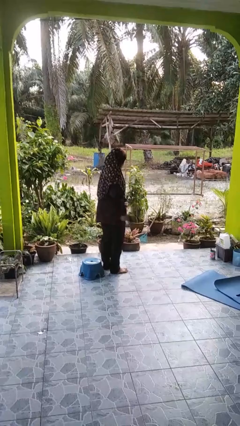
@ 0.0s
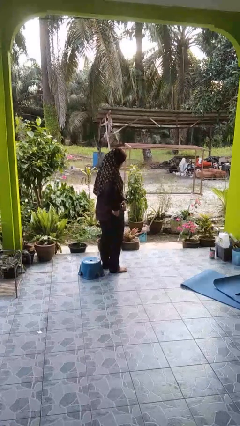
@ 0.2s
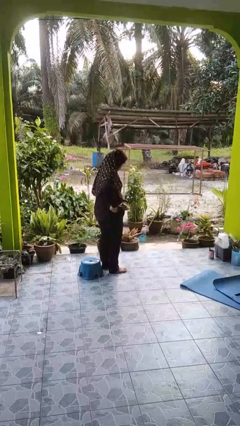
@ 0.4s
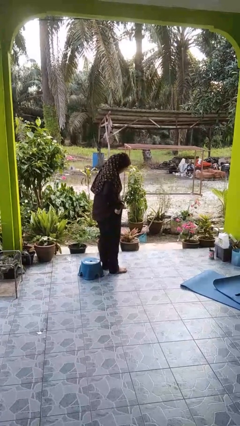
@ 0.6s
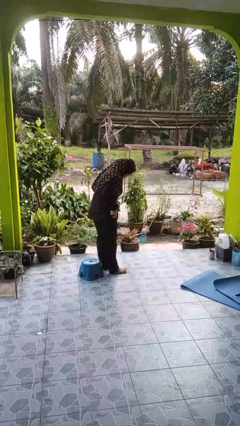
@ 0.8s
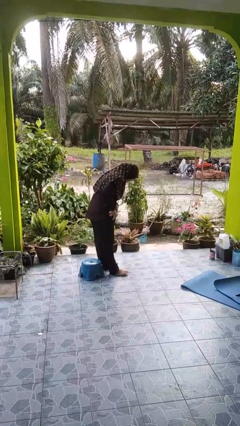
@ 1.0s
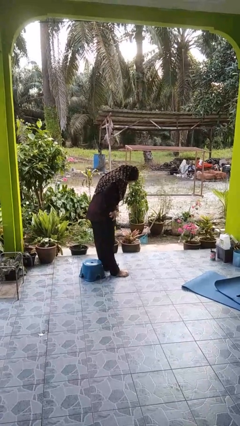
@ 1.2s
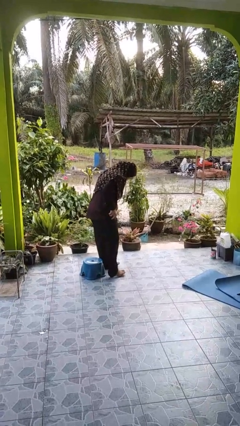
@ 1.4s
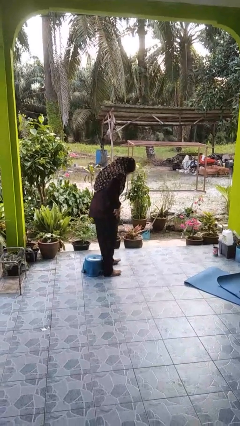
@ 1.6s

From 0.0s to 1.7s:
person puts phone into pocket

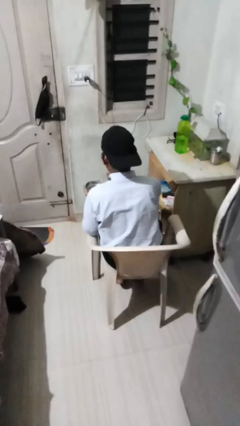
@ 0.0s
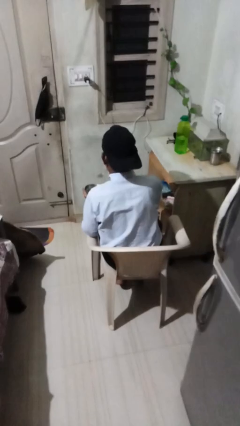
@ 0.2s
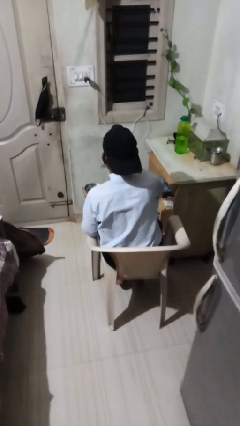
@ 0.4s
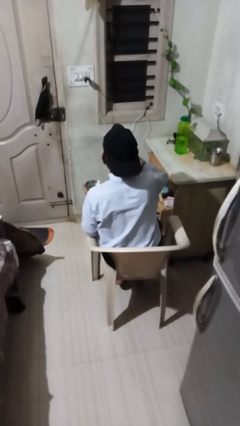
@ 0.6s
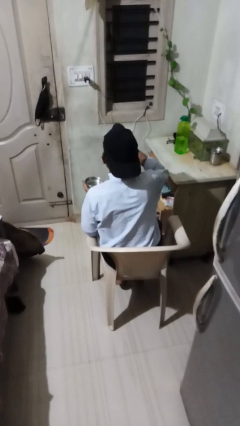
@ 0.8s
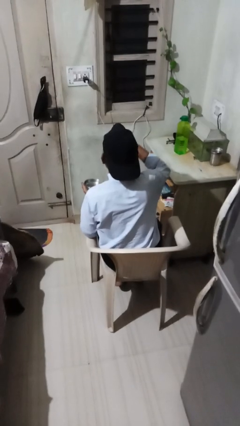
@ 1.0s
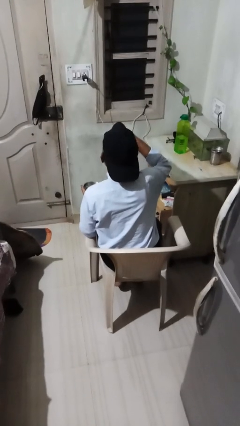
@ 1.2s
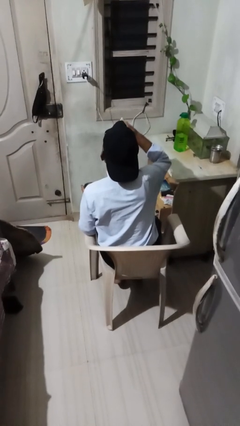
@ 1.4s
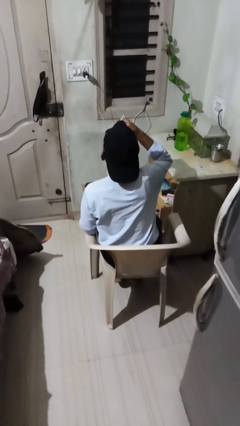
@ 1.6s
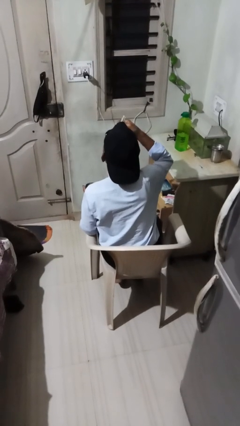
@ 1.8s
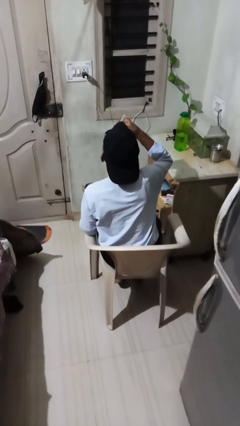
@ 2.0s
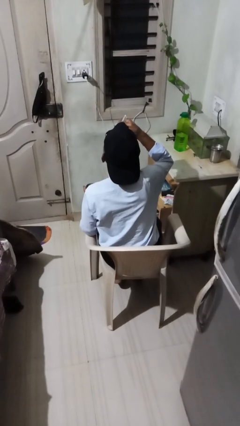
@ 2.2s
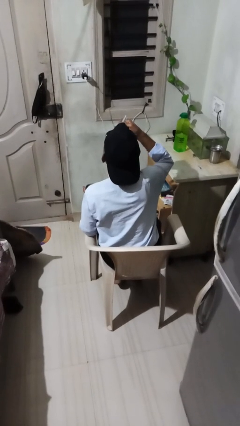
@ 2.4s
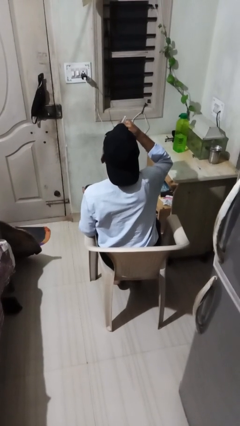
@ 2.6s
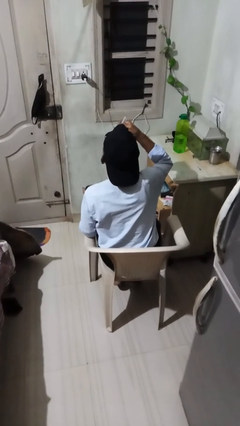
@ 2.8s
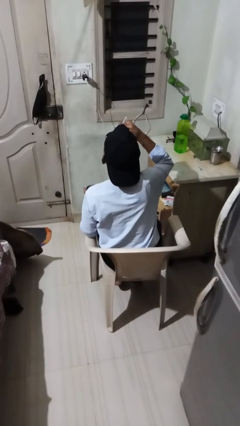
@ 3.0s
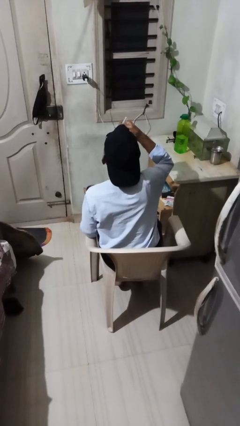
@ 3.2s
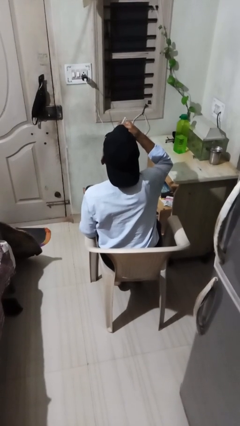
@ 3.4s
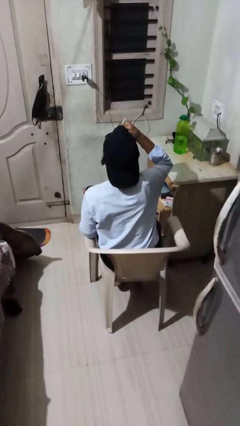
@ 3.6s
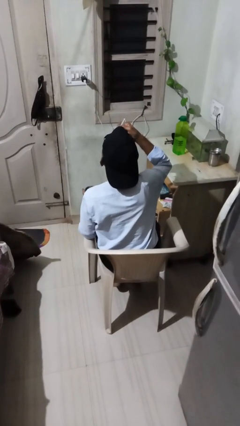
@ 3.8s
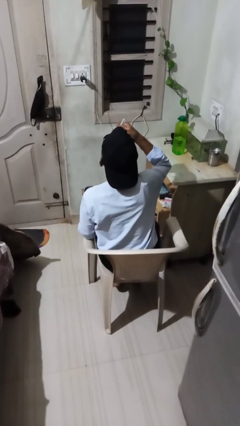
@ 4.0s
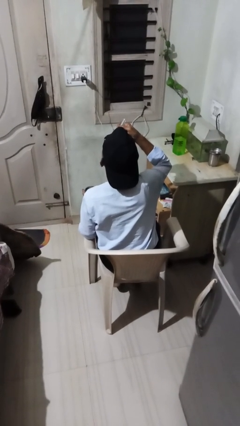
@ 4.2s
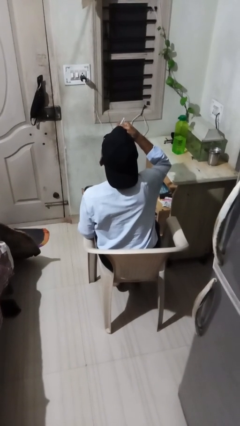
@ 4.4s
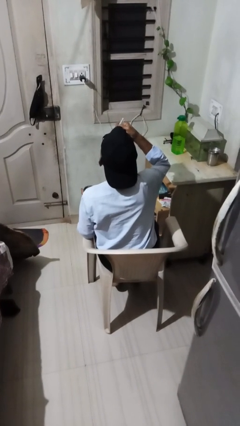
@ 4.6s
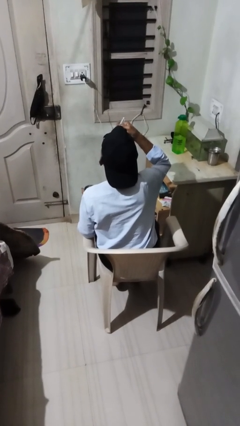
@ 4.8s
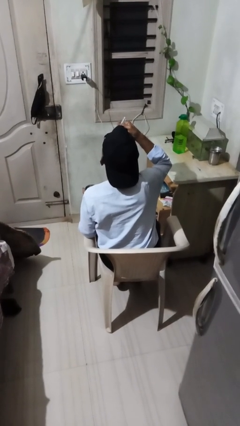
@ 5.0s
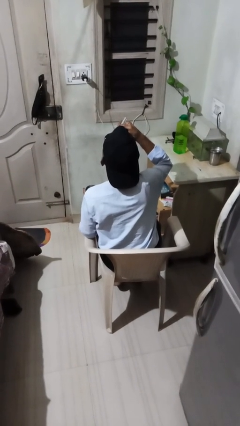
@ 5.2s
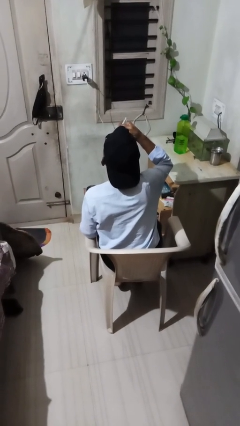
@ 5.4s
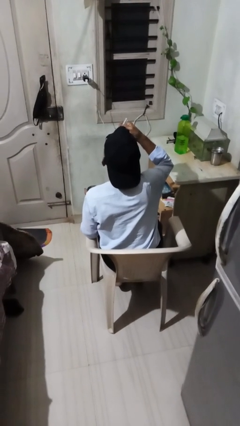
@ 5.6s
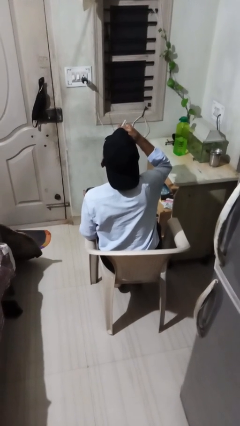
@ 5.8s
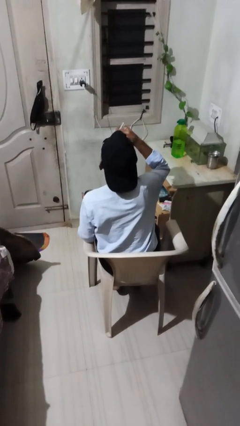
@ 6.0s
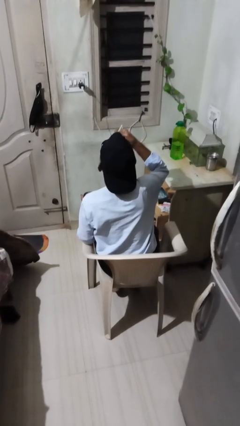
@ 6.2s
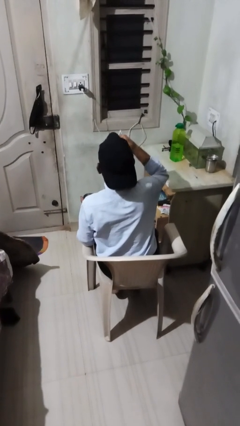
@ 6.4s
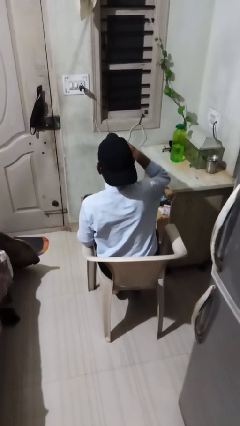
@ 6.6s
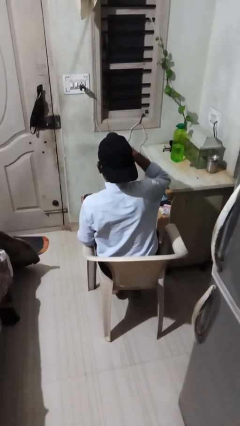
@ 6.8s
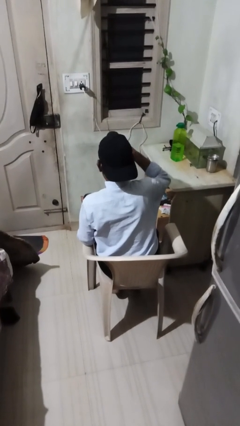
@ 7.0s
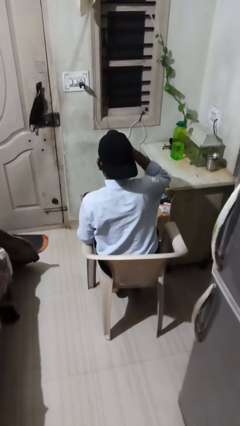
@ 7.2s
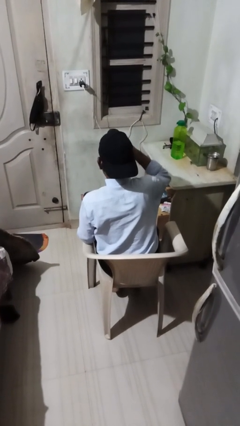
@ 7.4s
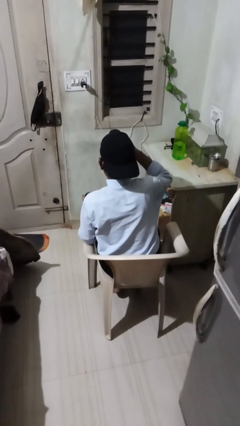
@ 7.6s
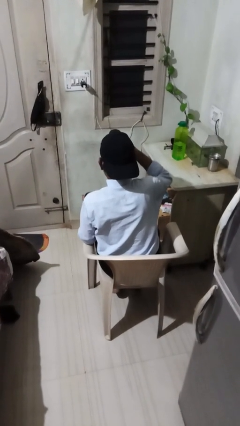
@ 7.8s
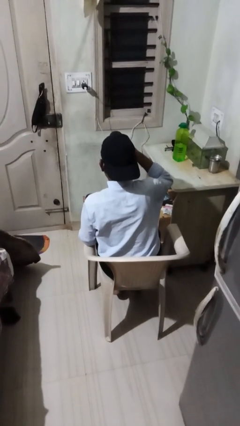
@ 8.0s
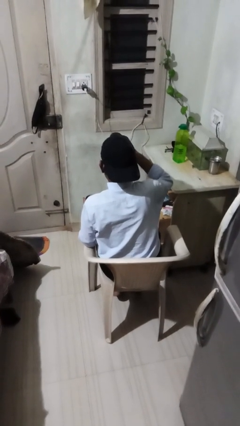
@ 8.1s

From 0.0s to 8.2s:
person eats with utensil

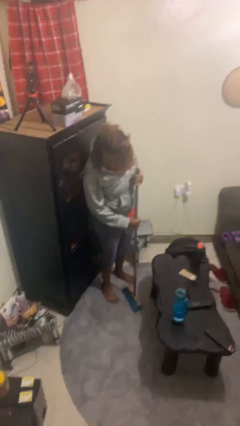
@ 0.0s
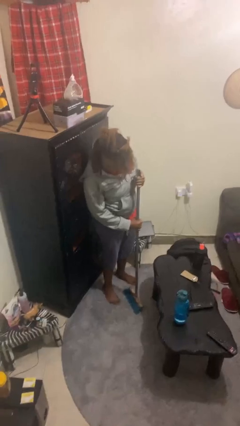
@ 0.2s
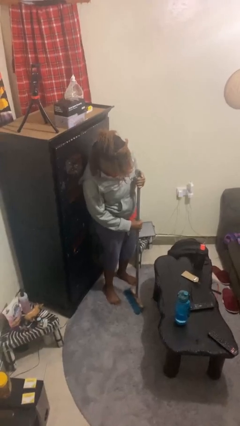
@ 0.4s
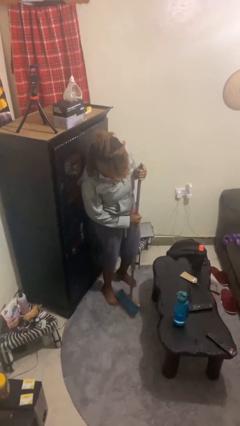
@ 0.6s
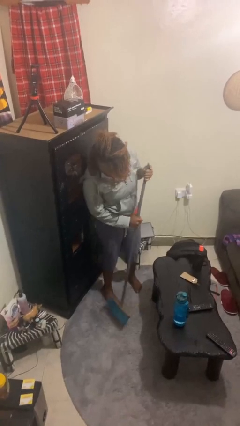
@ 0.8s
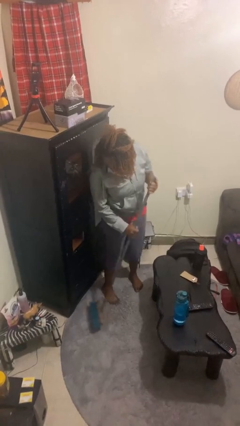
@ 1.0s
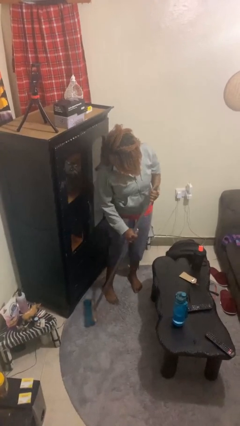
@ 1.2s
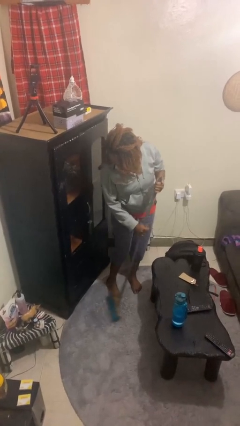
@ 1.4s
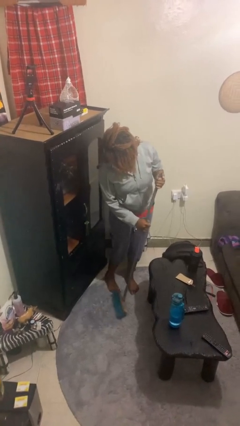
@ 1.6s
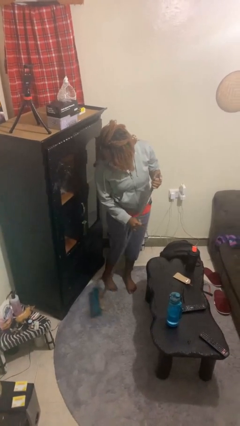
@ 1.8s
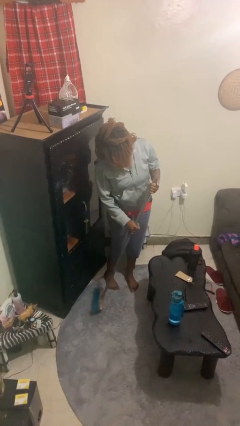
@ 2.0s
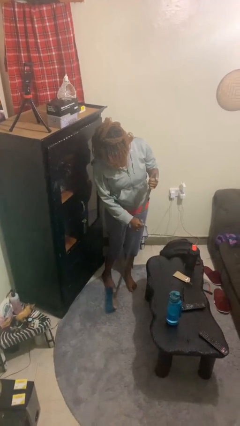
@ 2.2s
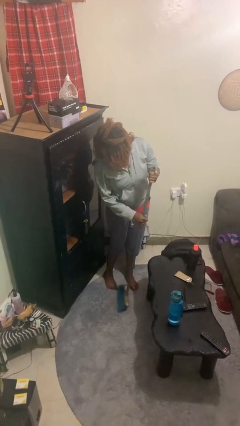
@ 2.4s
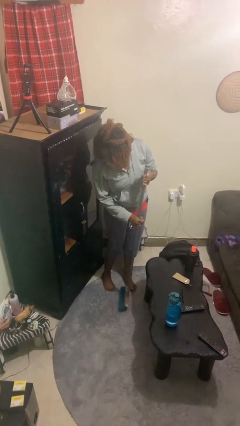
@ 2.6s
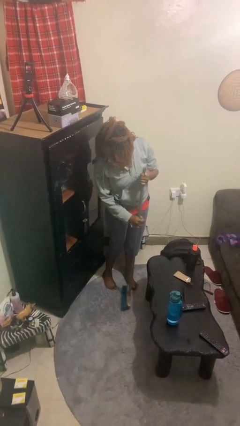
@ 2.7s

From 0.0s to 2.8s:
person sweeps floor

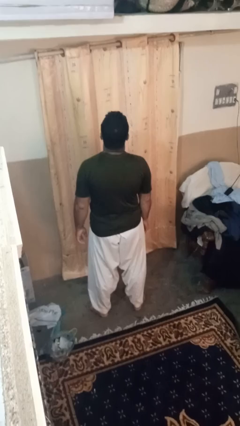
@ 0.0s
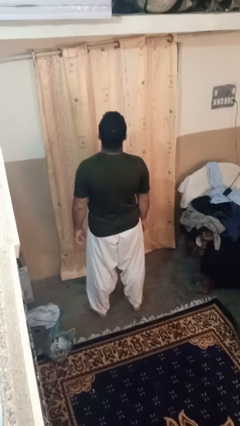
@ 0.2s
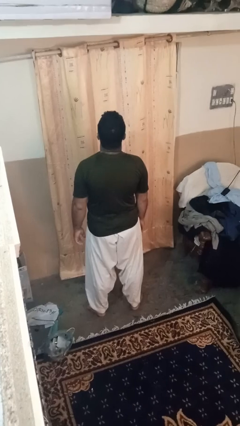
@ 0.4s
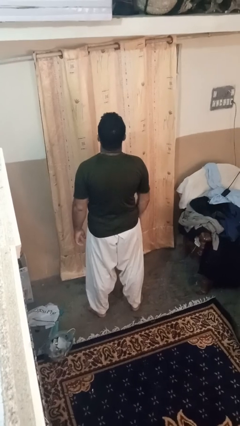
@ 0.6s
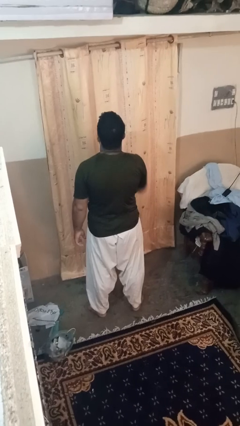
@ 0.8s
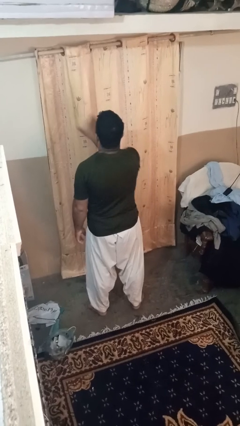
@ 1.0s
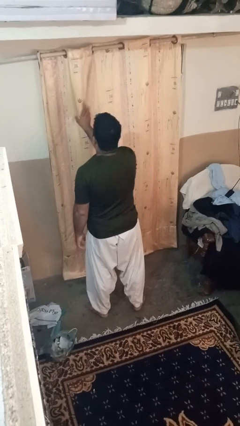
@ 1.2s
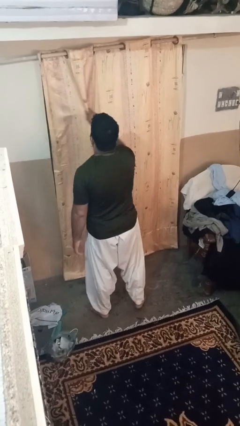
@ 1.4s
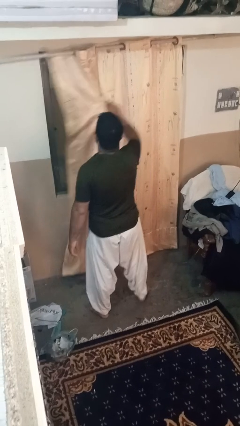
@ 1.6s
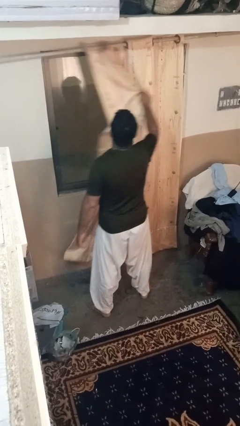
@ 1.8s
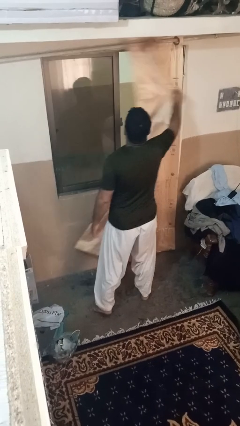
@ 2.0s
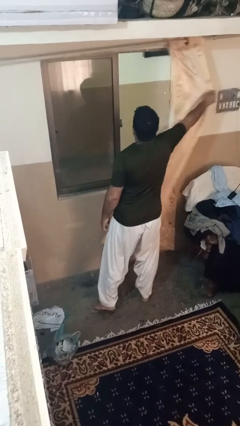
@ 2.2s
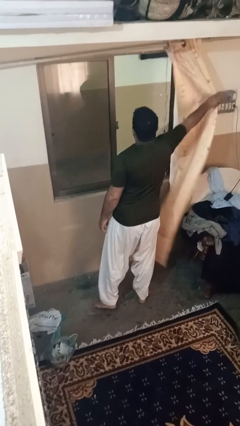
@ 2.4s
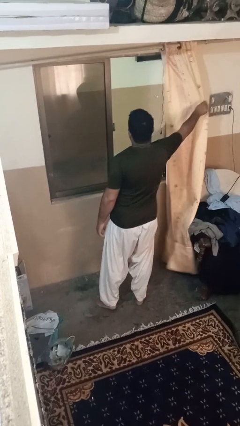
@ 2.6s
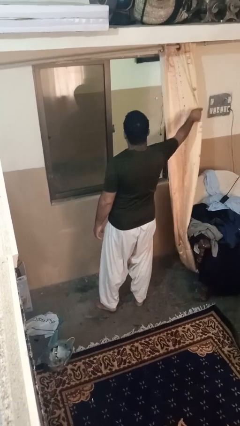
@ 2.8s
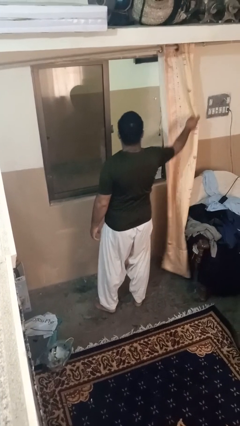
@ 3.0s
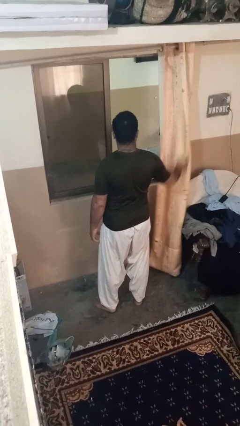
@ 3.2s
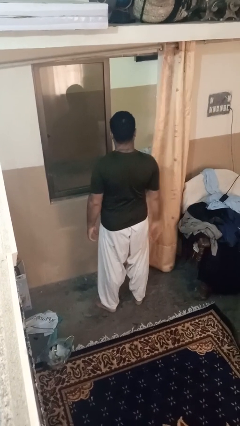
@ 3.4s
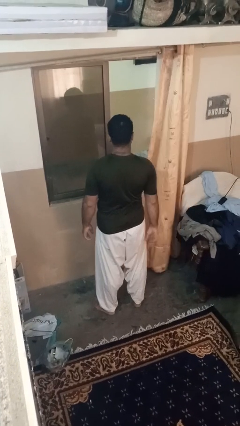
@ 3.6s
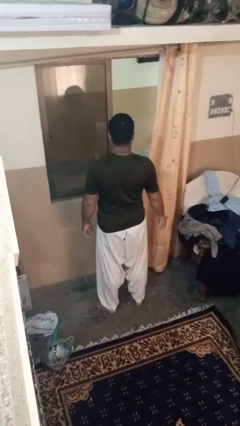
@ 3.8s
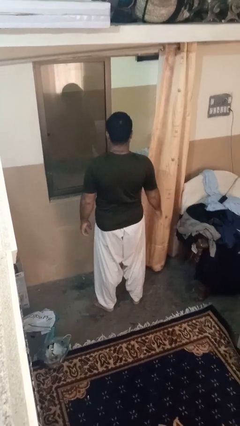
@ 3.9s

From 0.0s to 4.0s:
person opens curtains

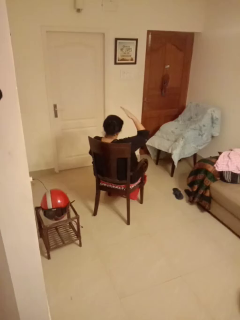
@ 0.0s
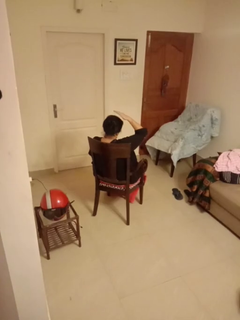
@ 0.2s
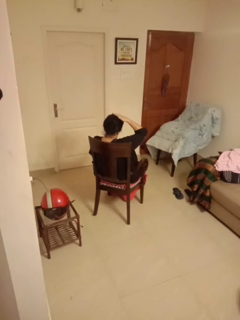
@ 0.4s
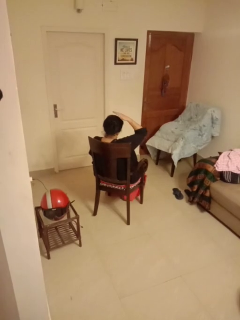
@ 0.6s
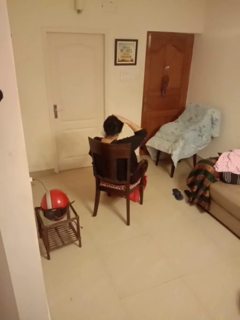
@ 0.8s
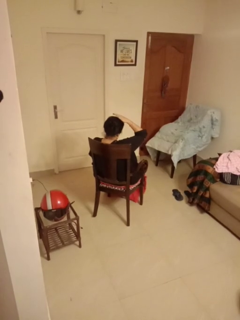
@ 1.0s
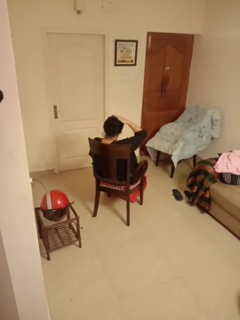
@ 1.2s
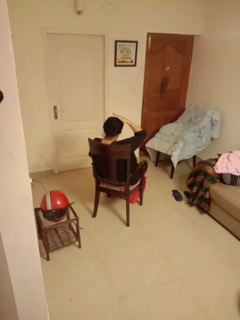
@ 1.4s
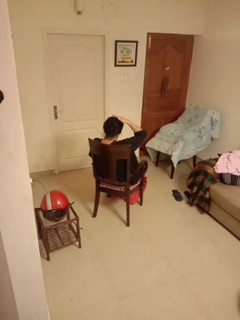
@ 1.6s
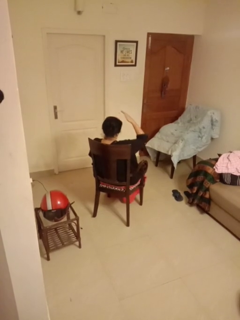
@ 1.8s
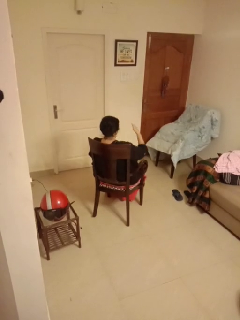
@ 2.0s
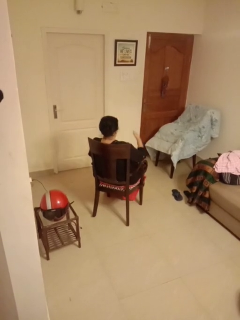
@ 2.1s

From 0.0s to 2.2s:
person pats head
